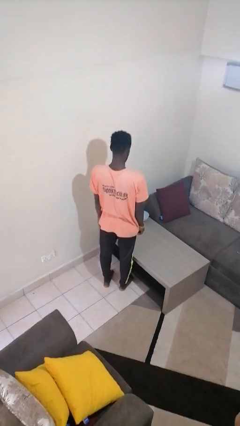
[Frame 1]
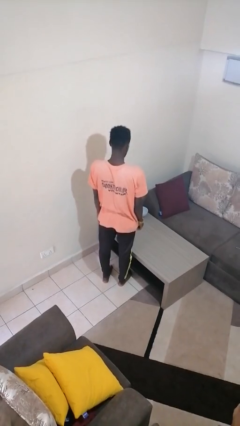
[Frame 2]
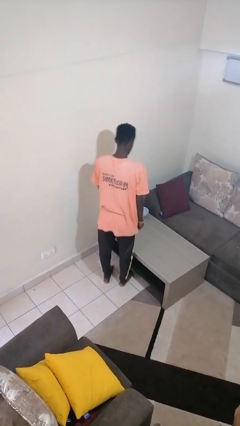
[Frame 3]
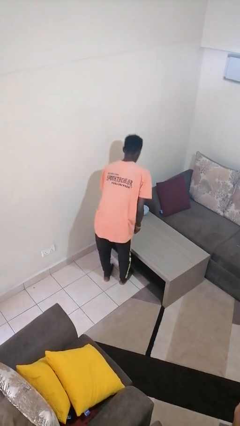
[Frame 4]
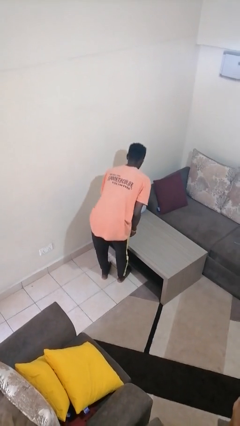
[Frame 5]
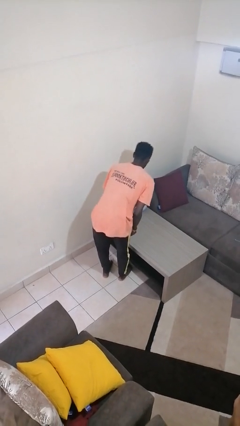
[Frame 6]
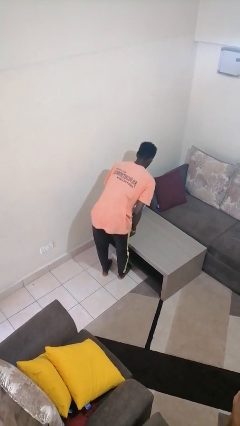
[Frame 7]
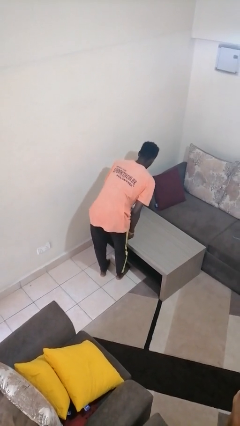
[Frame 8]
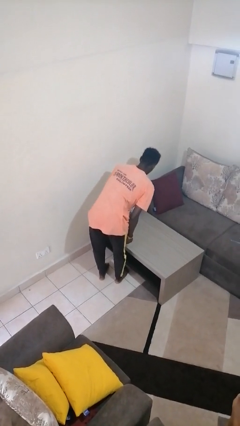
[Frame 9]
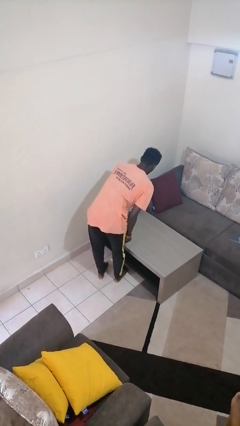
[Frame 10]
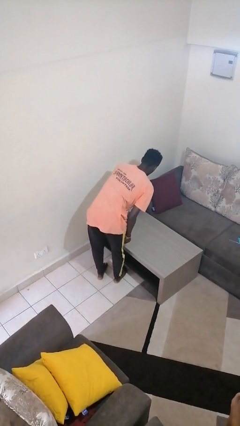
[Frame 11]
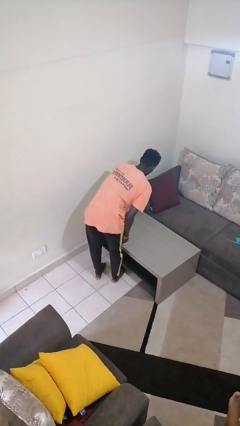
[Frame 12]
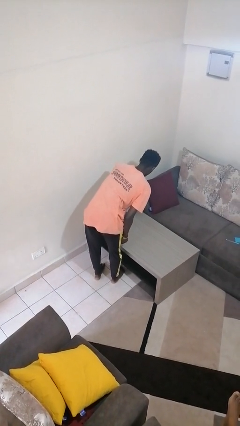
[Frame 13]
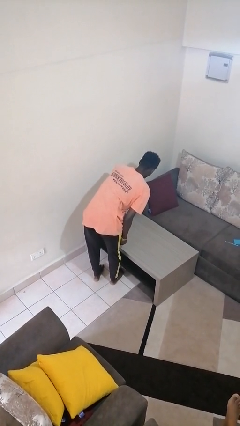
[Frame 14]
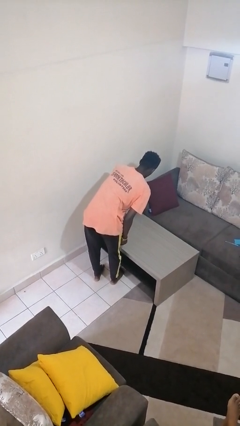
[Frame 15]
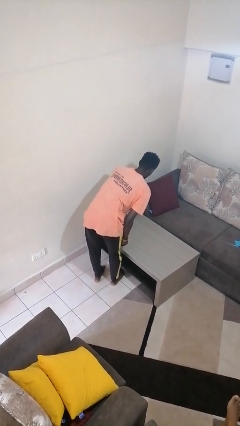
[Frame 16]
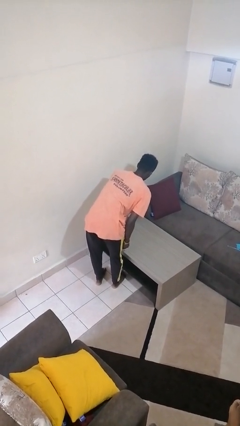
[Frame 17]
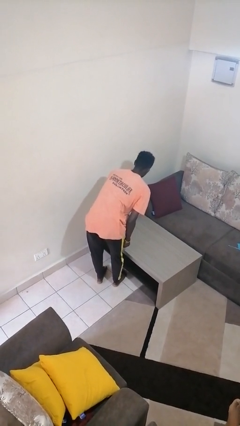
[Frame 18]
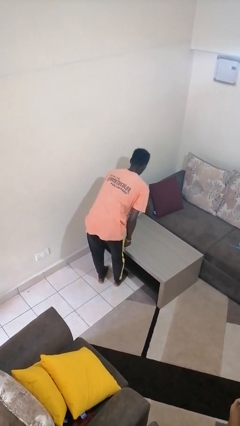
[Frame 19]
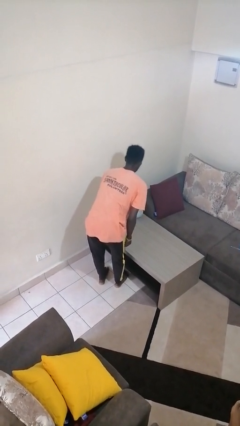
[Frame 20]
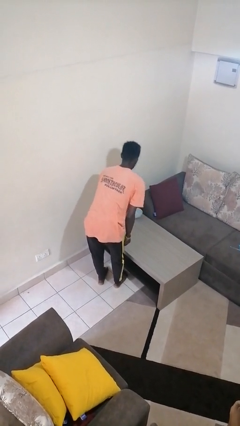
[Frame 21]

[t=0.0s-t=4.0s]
person pours into bowl

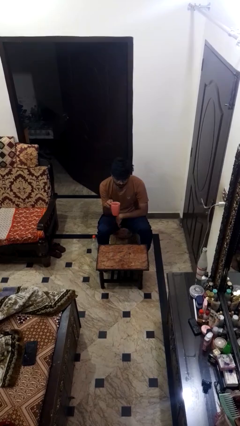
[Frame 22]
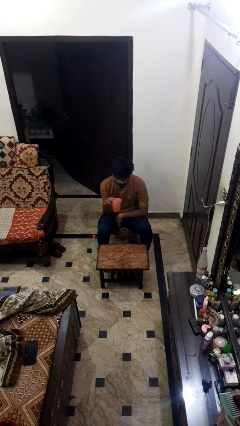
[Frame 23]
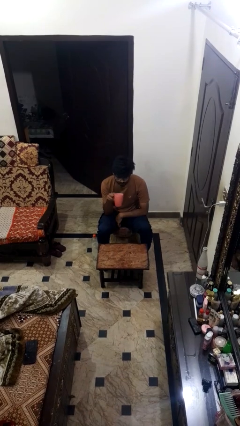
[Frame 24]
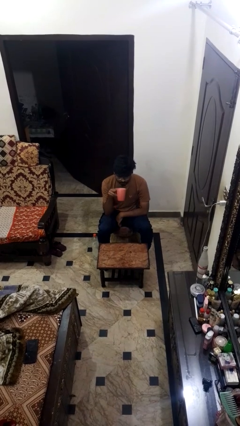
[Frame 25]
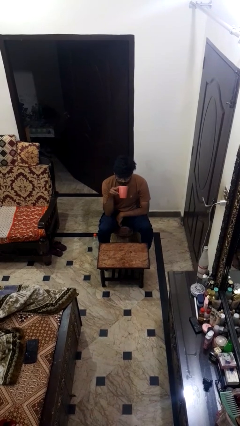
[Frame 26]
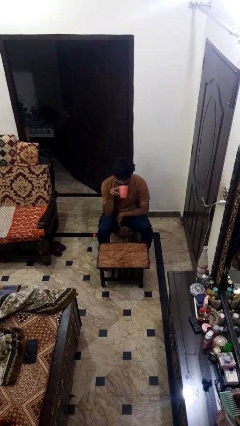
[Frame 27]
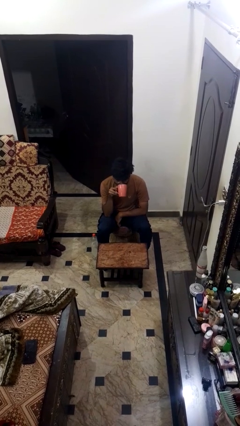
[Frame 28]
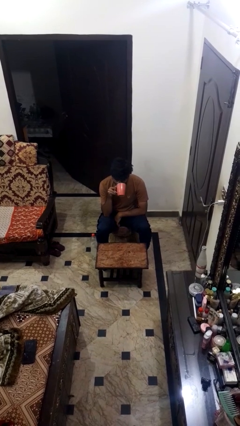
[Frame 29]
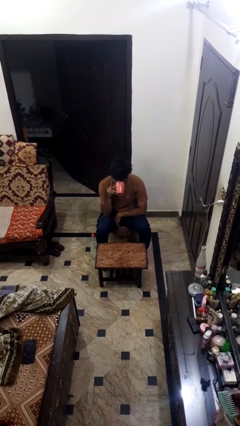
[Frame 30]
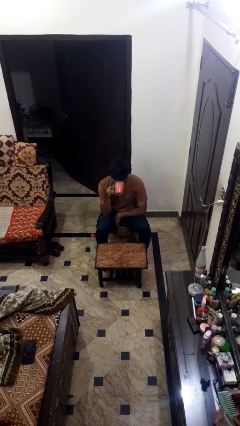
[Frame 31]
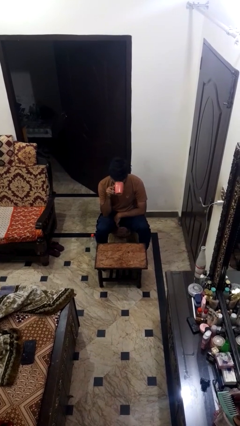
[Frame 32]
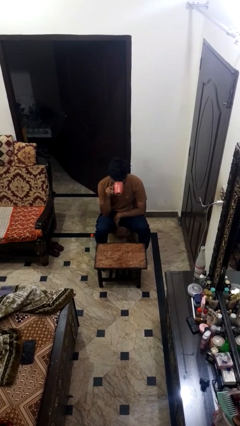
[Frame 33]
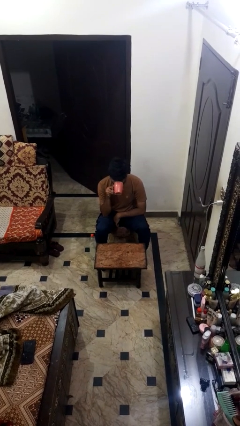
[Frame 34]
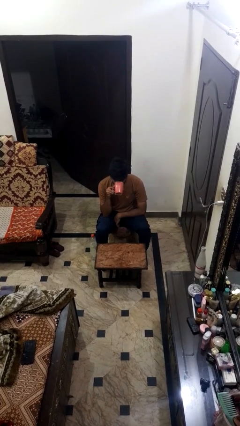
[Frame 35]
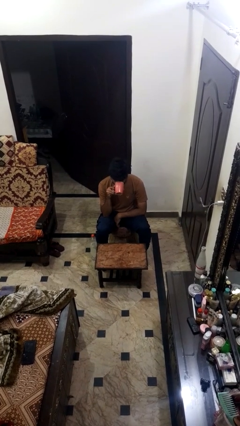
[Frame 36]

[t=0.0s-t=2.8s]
person drinks from mug

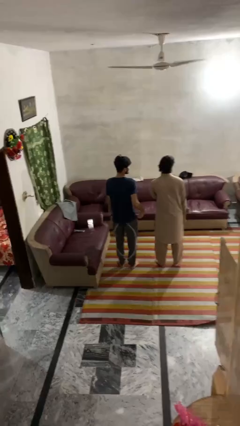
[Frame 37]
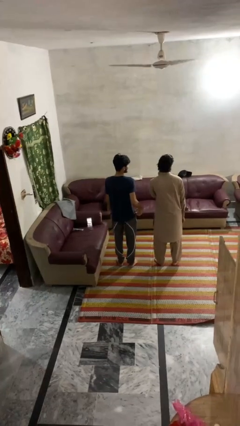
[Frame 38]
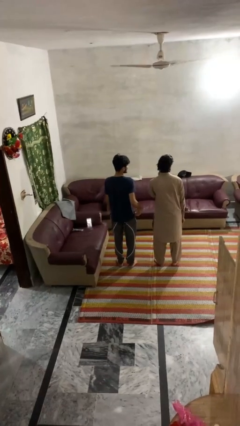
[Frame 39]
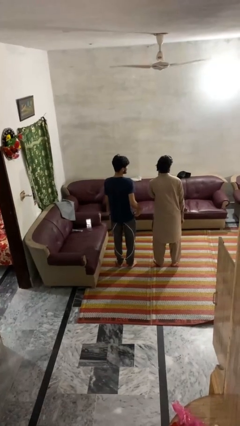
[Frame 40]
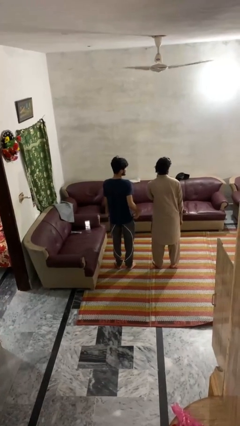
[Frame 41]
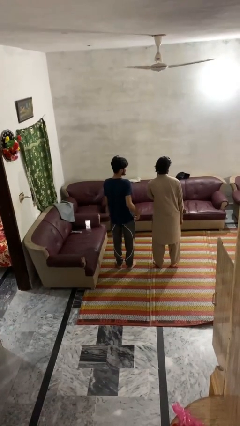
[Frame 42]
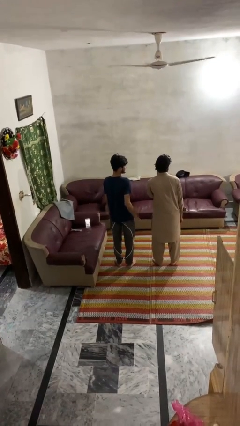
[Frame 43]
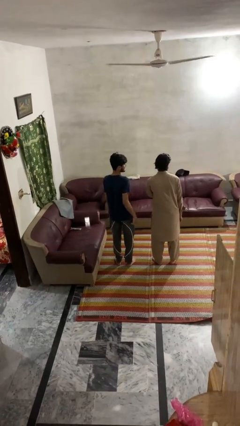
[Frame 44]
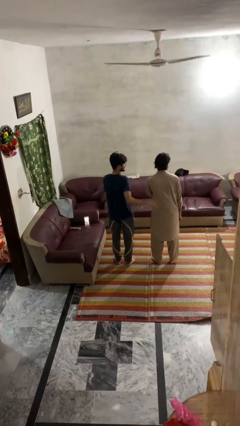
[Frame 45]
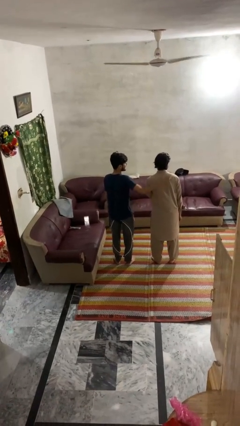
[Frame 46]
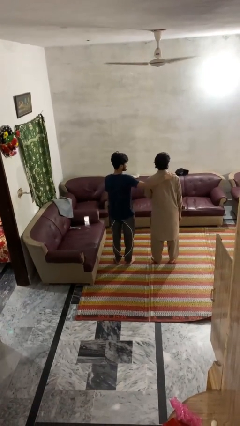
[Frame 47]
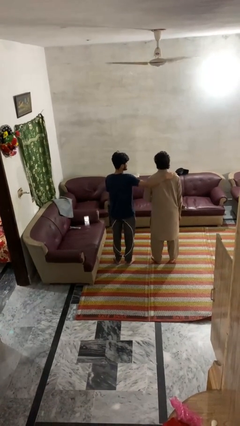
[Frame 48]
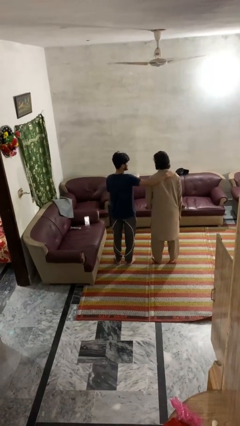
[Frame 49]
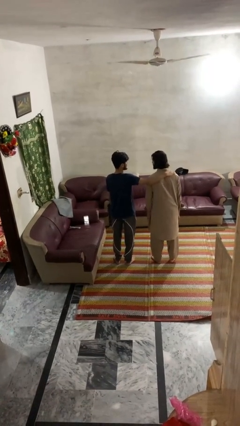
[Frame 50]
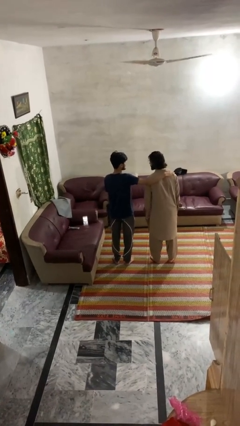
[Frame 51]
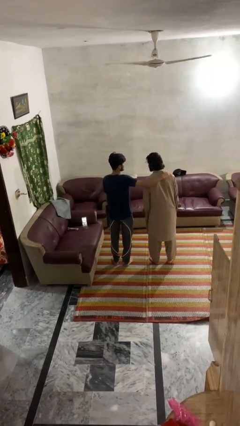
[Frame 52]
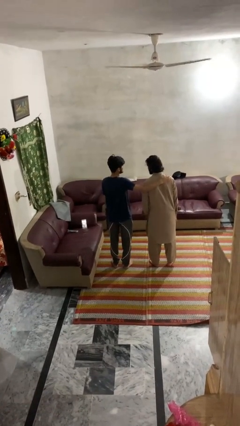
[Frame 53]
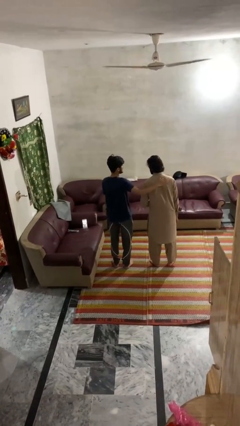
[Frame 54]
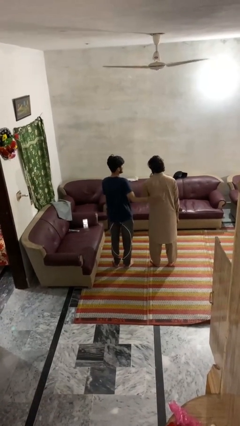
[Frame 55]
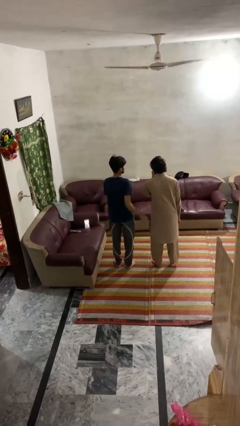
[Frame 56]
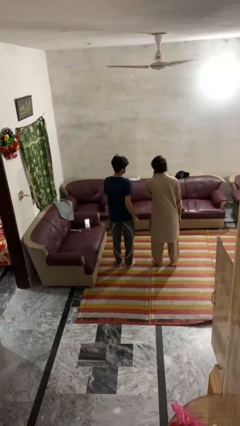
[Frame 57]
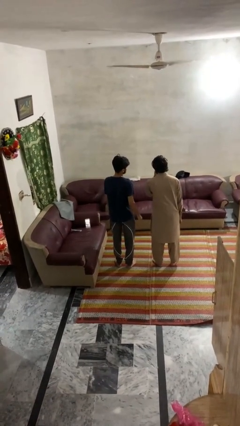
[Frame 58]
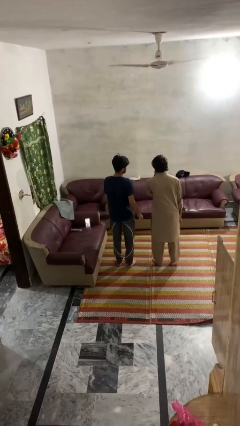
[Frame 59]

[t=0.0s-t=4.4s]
person pounds shoulders of person

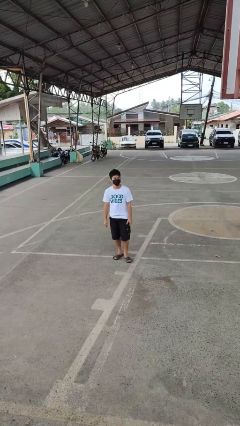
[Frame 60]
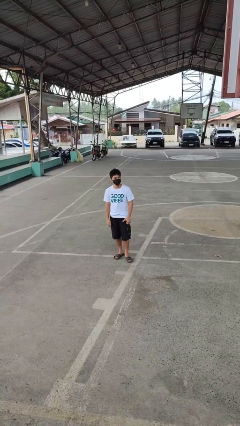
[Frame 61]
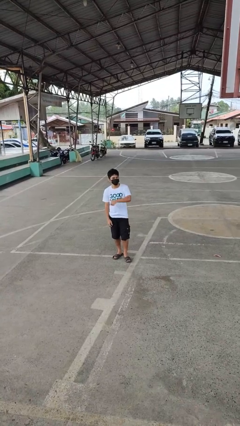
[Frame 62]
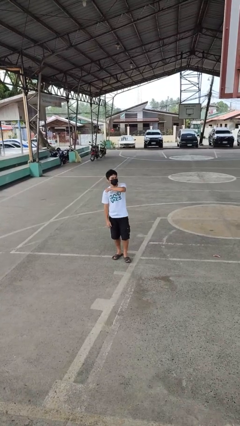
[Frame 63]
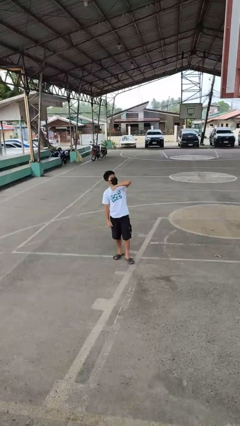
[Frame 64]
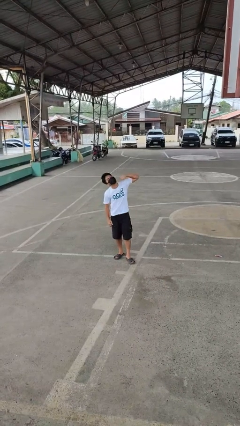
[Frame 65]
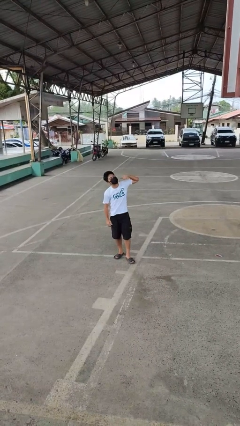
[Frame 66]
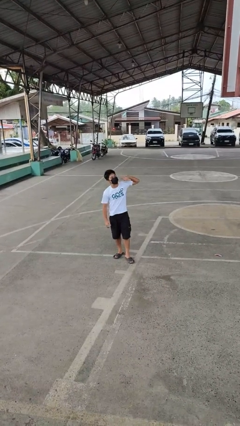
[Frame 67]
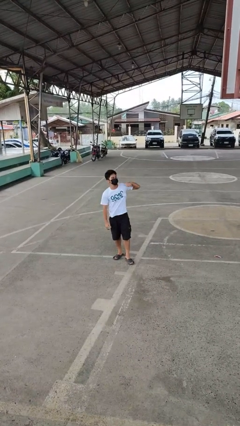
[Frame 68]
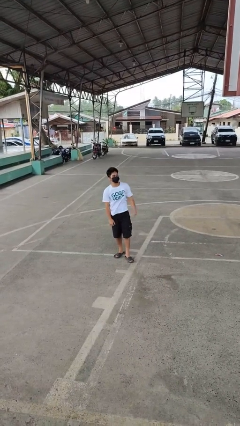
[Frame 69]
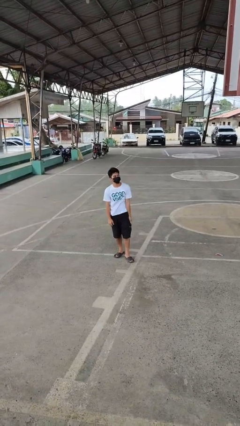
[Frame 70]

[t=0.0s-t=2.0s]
person gestures cut

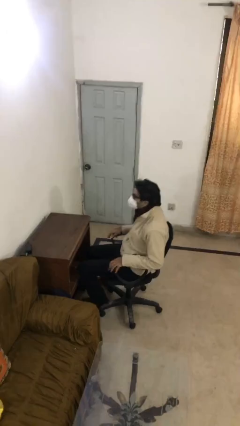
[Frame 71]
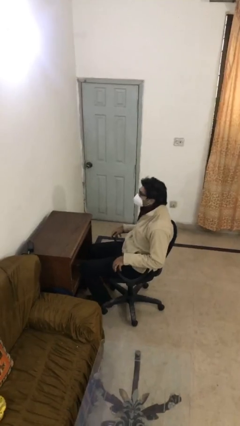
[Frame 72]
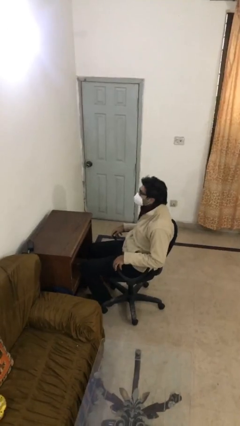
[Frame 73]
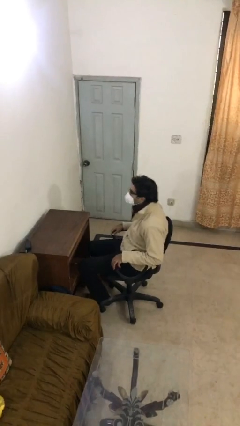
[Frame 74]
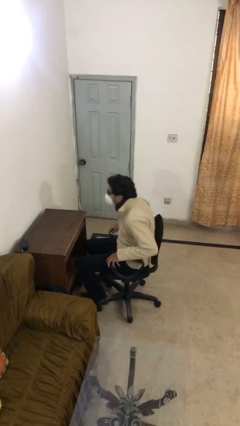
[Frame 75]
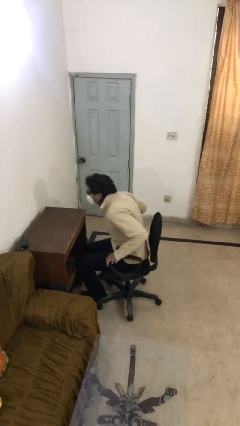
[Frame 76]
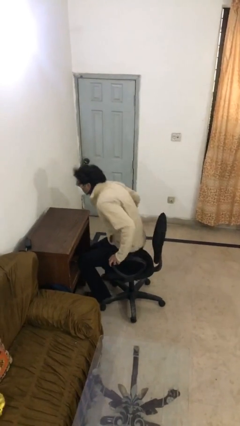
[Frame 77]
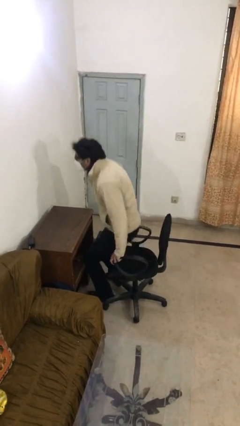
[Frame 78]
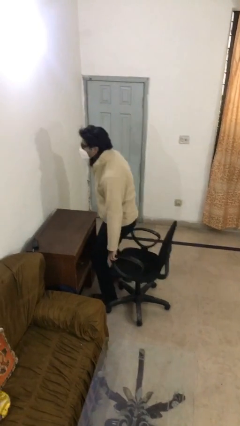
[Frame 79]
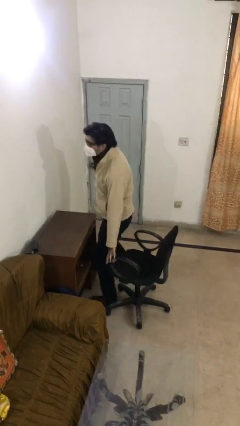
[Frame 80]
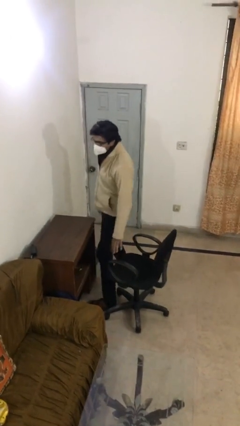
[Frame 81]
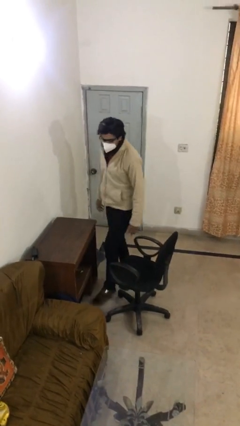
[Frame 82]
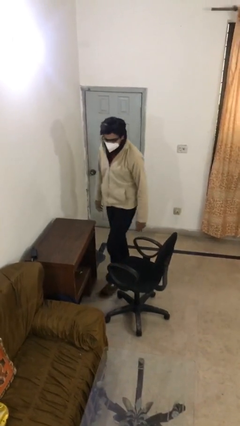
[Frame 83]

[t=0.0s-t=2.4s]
person stands up

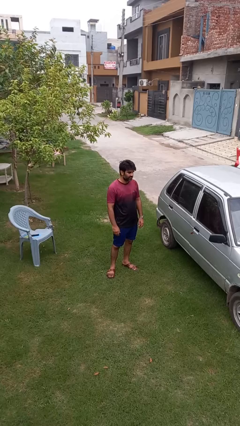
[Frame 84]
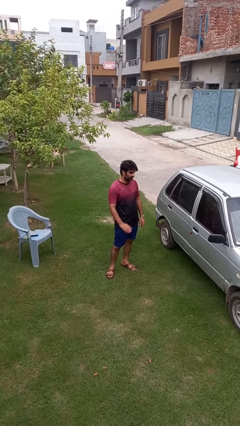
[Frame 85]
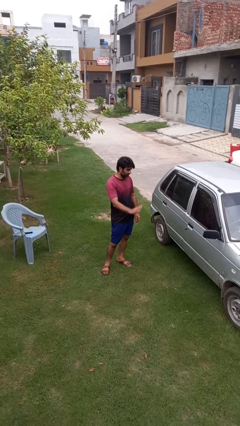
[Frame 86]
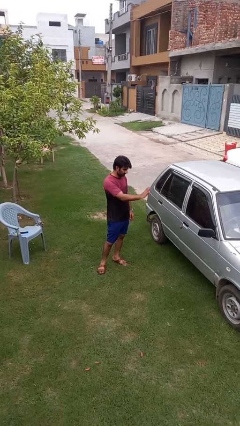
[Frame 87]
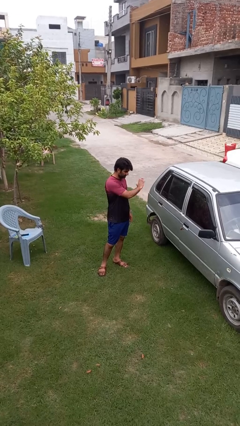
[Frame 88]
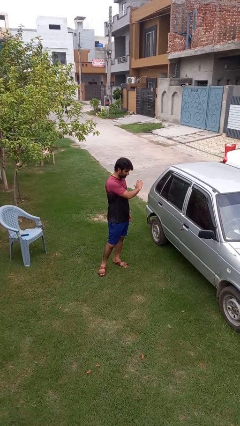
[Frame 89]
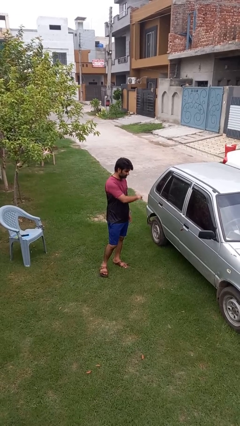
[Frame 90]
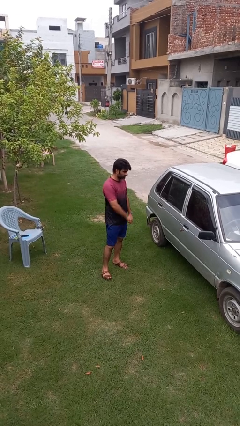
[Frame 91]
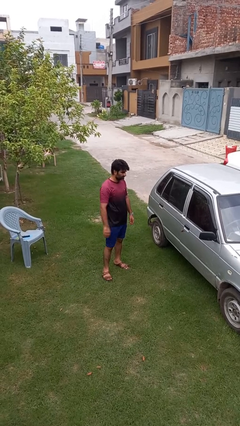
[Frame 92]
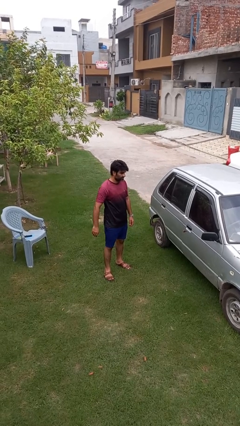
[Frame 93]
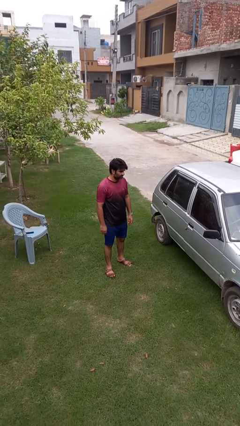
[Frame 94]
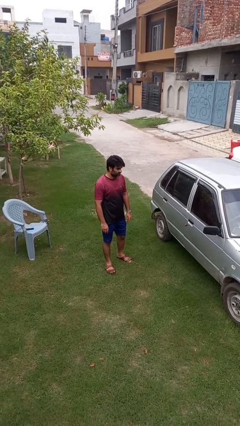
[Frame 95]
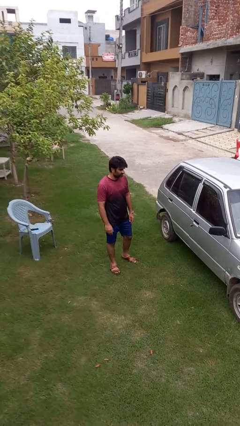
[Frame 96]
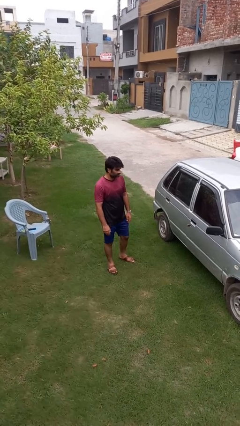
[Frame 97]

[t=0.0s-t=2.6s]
person gestures swipe left
